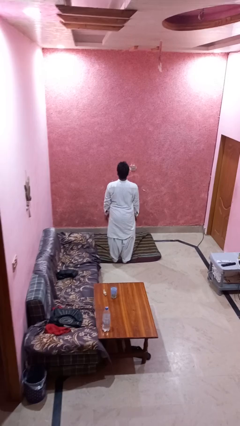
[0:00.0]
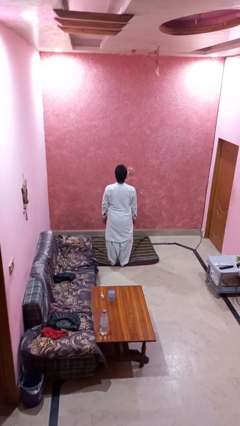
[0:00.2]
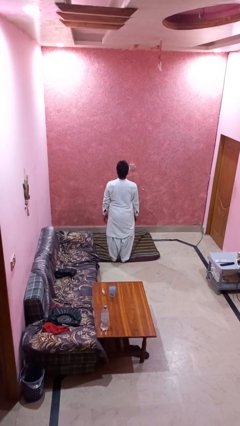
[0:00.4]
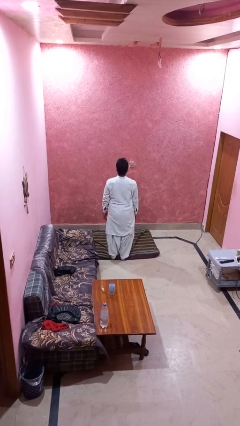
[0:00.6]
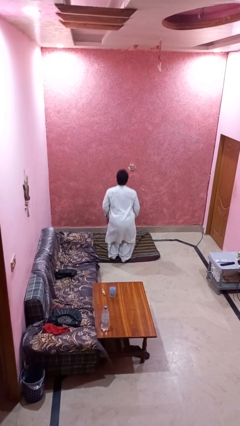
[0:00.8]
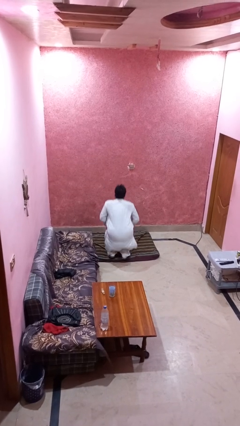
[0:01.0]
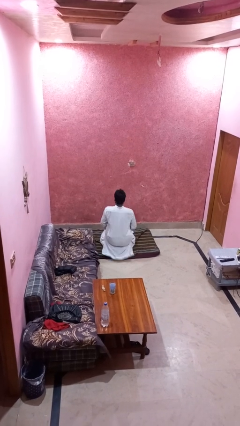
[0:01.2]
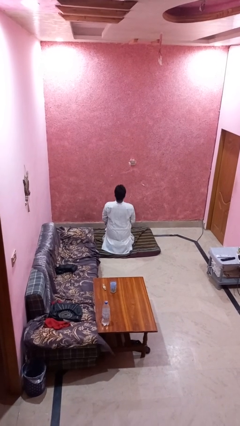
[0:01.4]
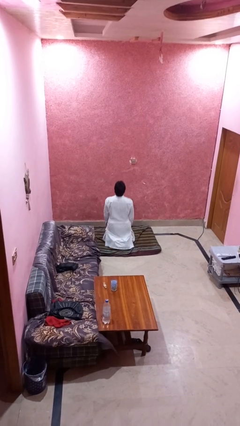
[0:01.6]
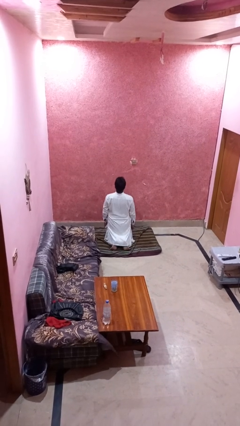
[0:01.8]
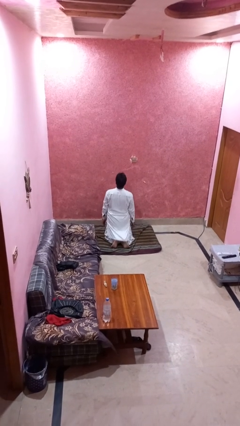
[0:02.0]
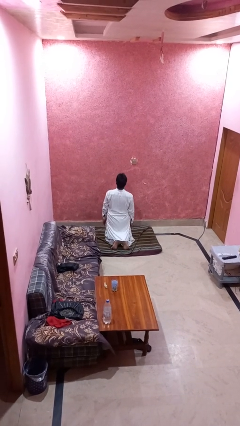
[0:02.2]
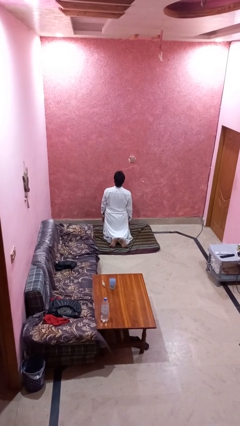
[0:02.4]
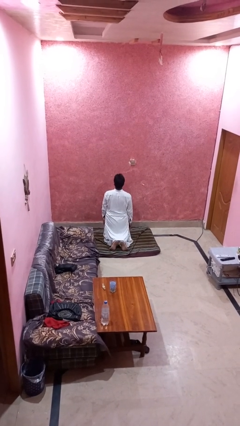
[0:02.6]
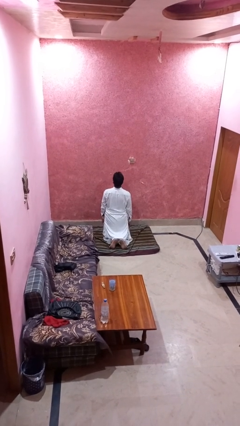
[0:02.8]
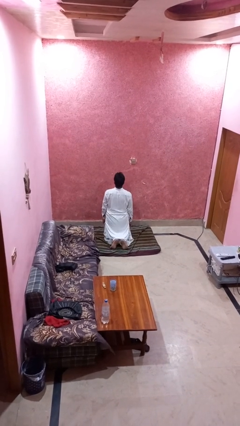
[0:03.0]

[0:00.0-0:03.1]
person kneels

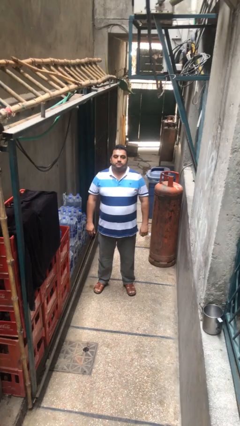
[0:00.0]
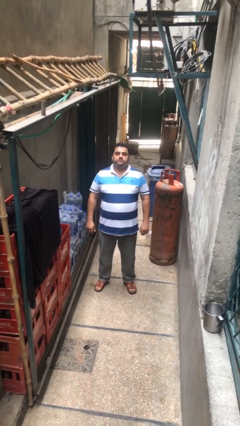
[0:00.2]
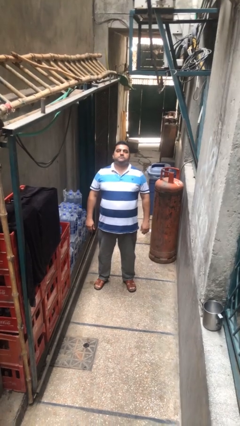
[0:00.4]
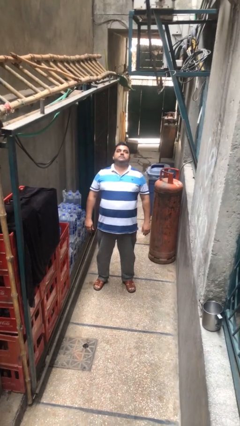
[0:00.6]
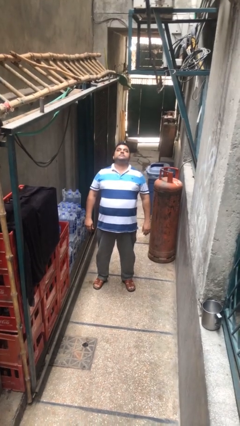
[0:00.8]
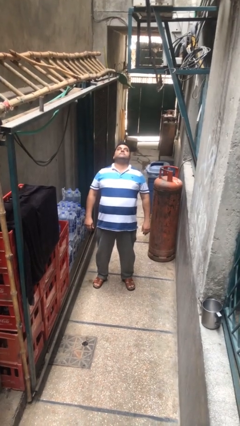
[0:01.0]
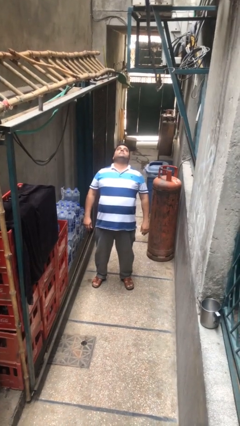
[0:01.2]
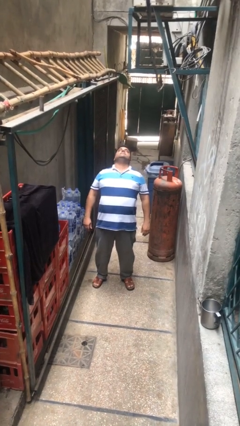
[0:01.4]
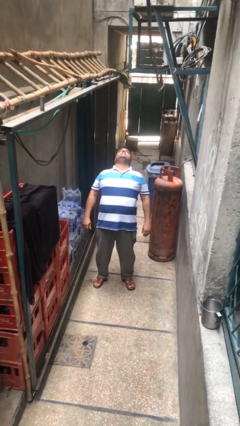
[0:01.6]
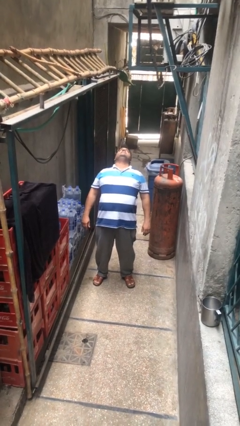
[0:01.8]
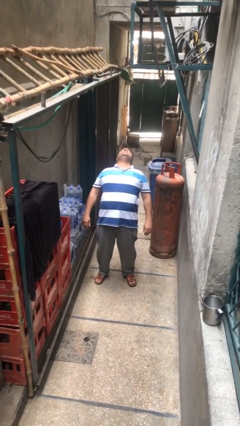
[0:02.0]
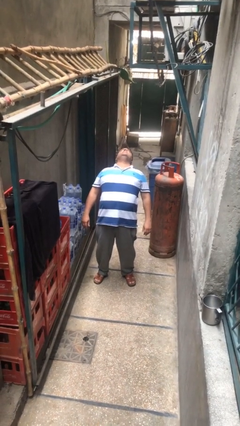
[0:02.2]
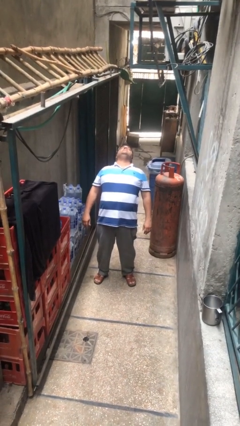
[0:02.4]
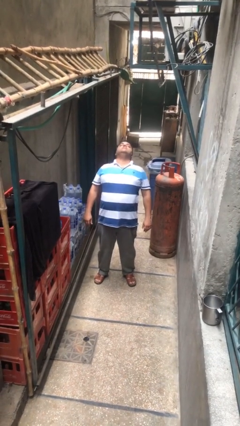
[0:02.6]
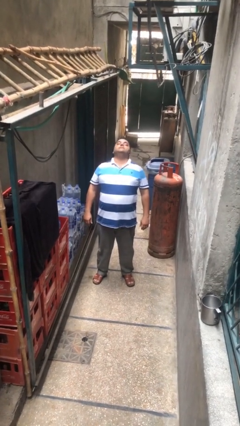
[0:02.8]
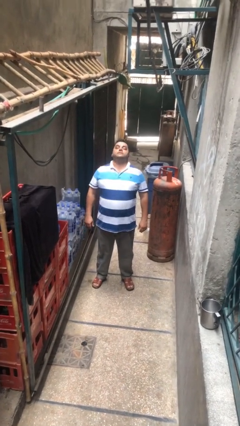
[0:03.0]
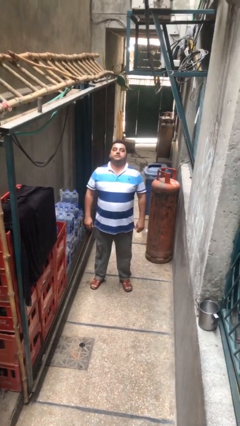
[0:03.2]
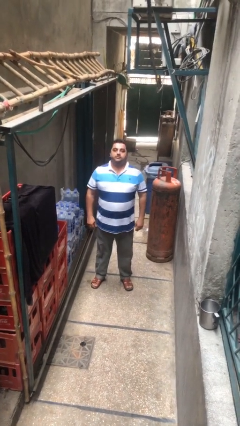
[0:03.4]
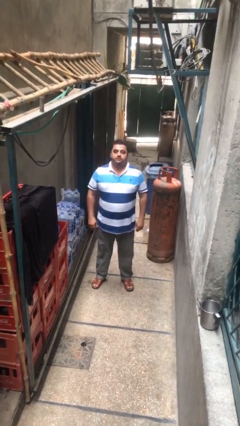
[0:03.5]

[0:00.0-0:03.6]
person stretches back

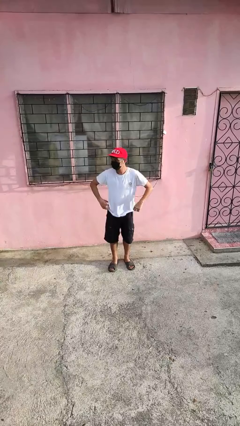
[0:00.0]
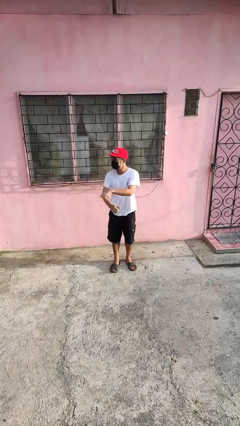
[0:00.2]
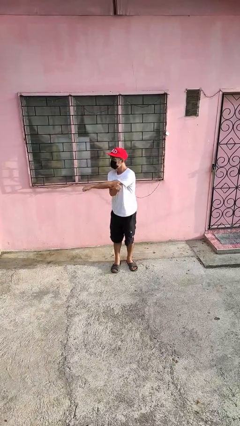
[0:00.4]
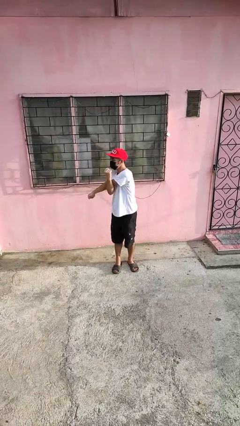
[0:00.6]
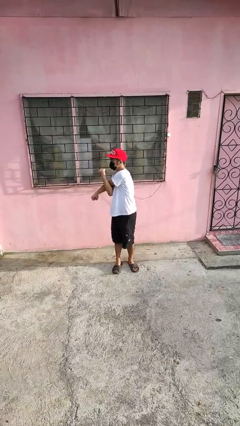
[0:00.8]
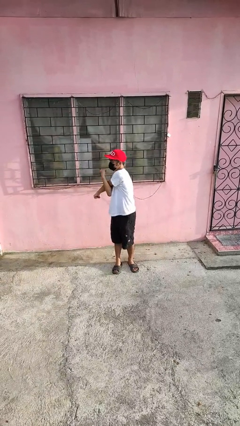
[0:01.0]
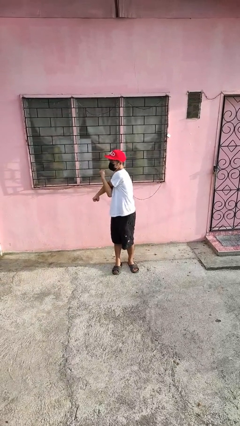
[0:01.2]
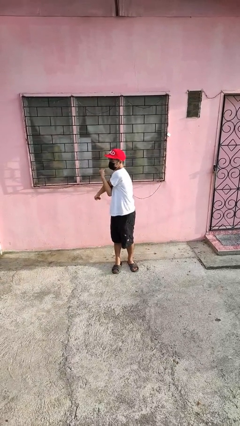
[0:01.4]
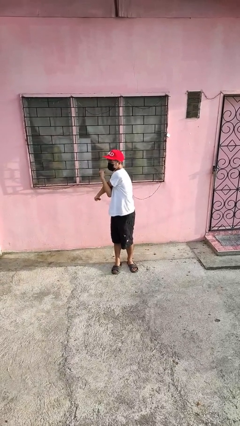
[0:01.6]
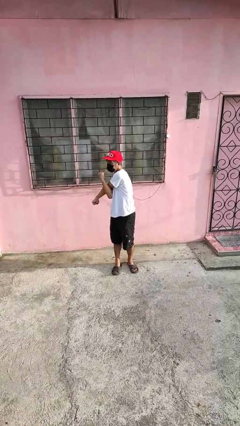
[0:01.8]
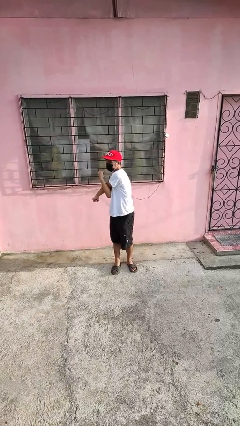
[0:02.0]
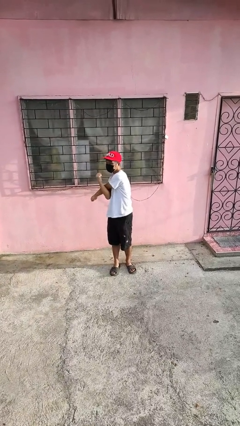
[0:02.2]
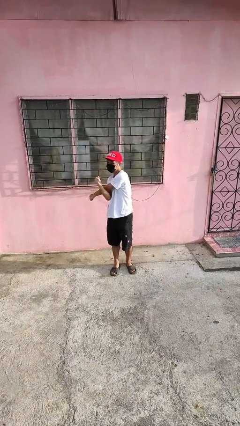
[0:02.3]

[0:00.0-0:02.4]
person stretches arms to side

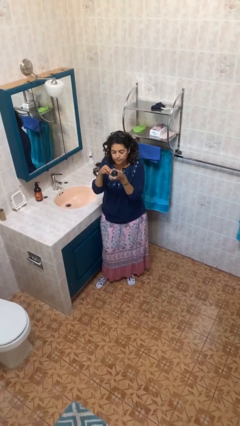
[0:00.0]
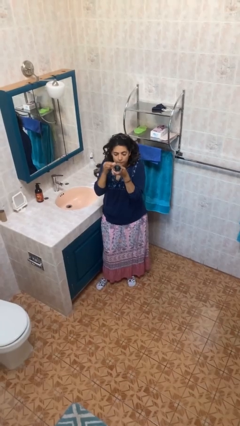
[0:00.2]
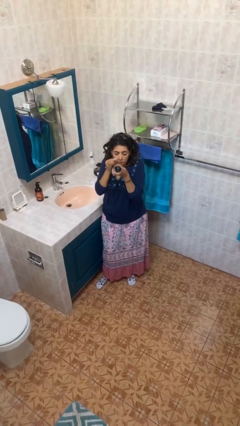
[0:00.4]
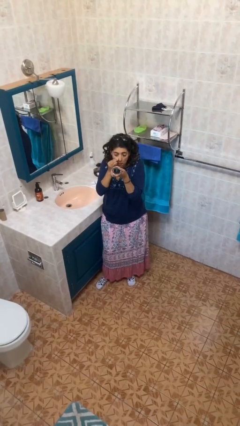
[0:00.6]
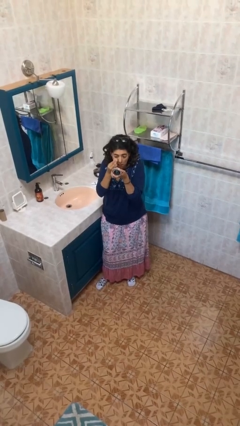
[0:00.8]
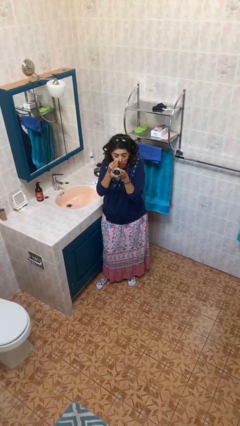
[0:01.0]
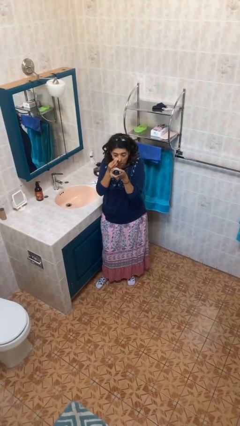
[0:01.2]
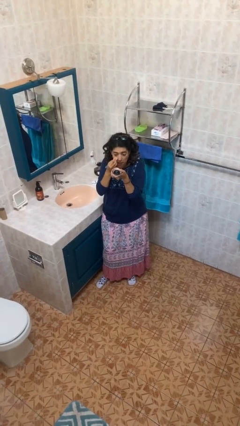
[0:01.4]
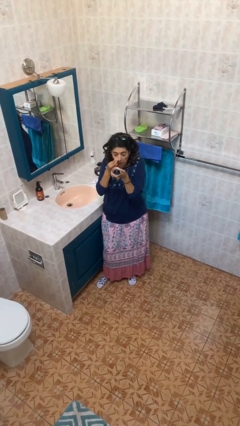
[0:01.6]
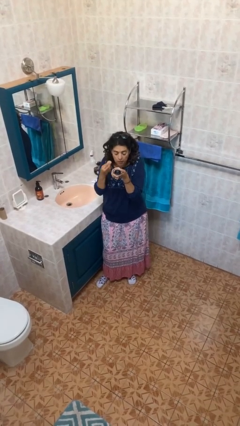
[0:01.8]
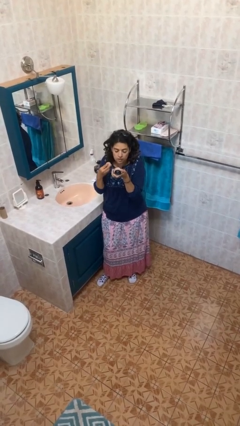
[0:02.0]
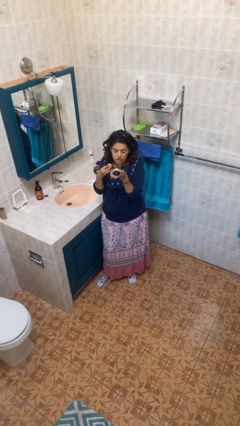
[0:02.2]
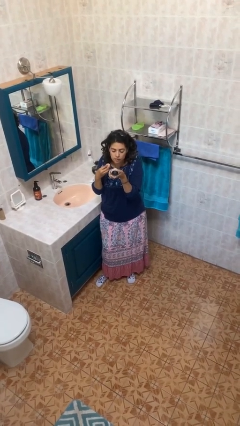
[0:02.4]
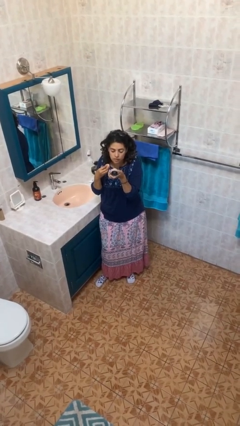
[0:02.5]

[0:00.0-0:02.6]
person applies foundation makeup

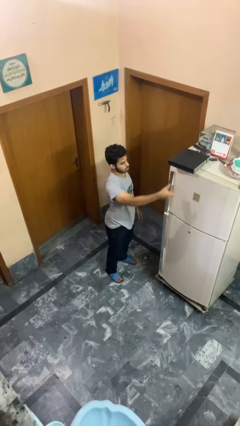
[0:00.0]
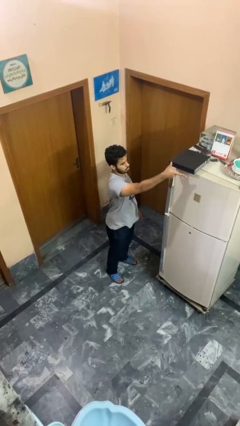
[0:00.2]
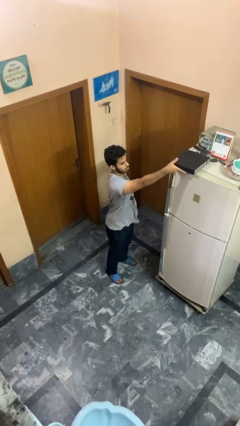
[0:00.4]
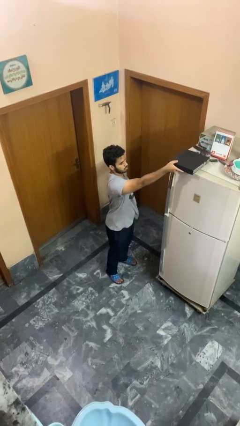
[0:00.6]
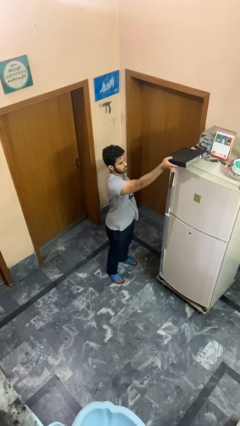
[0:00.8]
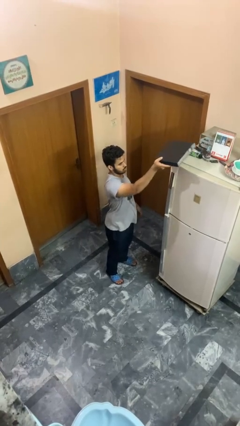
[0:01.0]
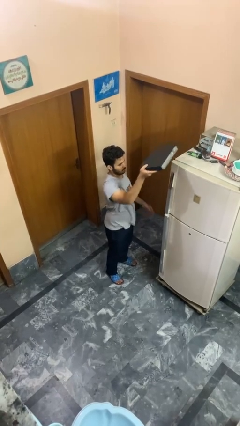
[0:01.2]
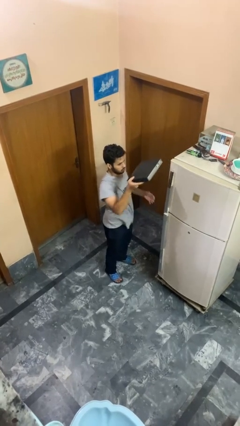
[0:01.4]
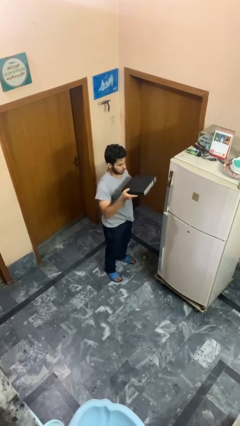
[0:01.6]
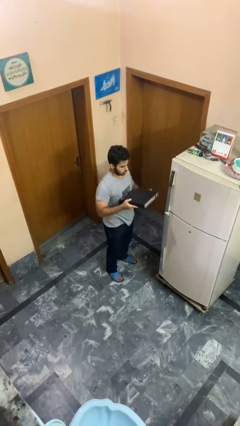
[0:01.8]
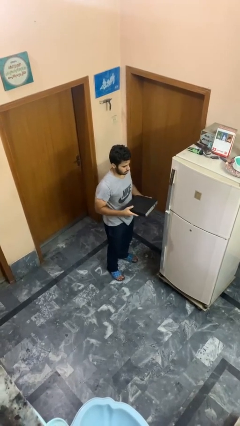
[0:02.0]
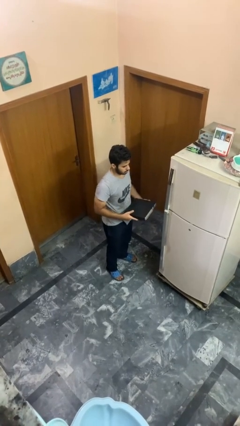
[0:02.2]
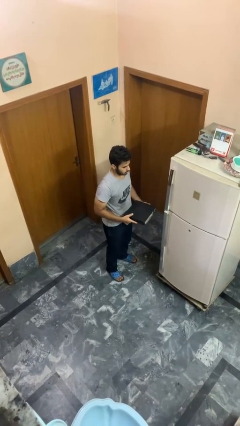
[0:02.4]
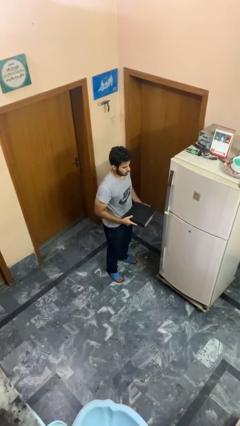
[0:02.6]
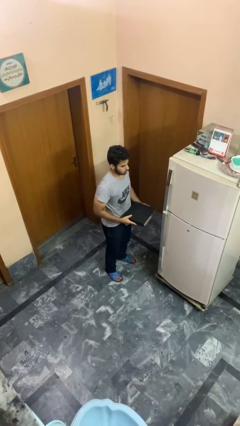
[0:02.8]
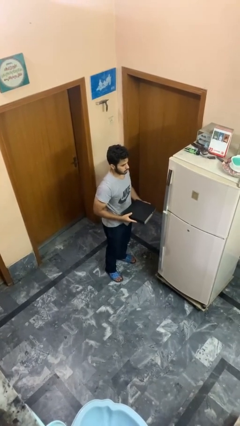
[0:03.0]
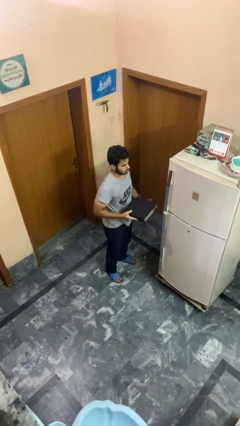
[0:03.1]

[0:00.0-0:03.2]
person picks up object from countertop

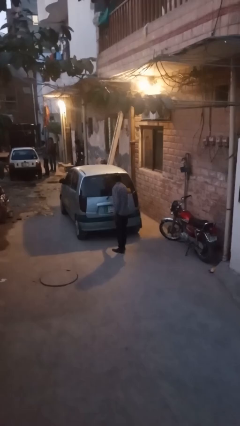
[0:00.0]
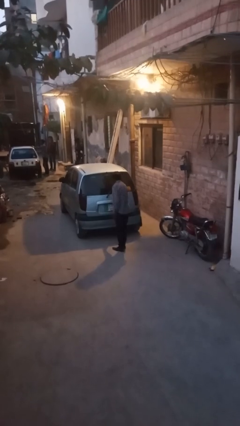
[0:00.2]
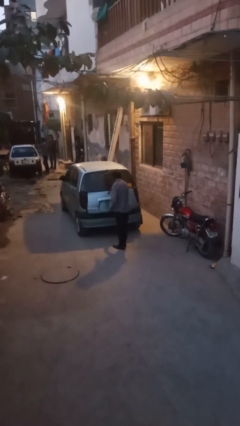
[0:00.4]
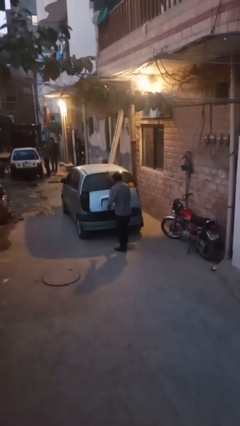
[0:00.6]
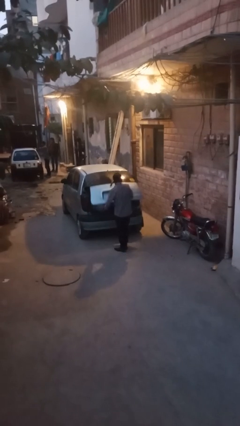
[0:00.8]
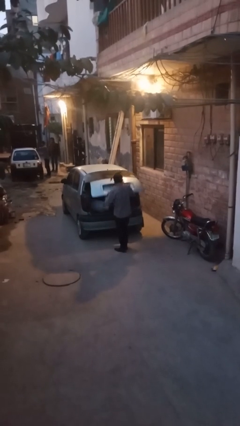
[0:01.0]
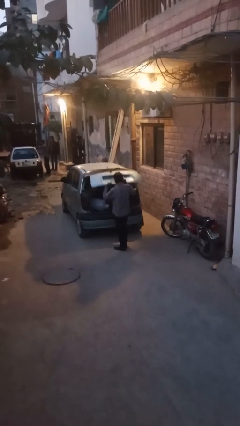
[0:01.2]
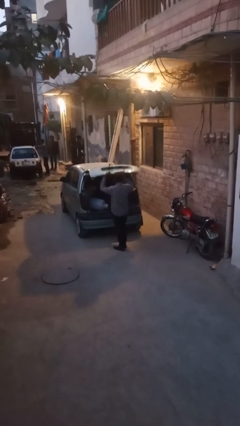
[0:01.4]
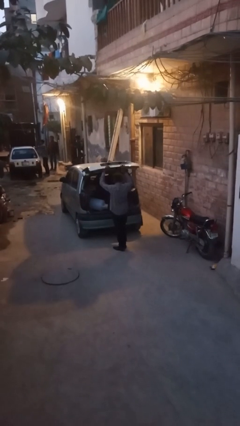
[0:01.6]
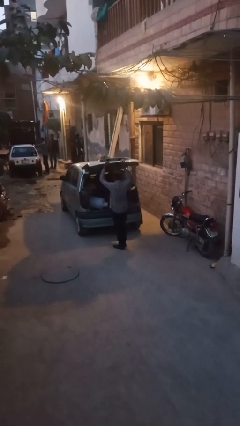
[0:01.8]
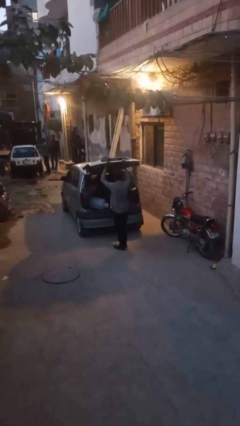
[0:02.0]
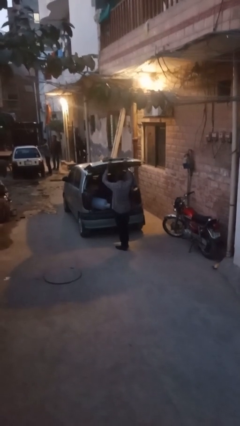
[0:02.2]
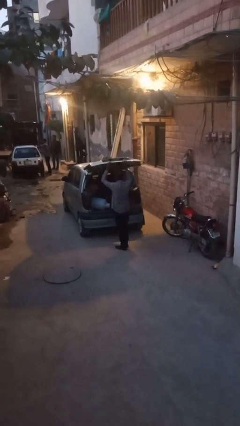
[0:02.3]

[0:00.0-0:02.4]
person opens car trunk

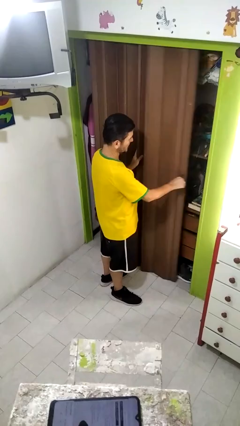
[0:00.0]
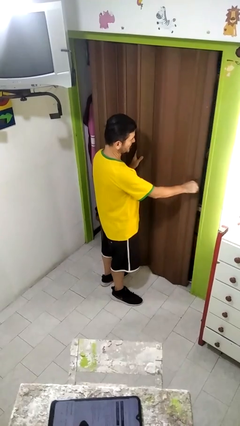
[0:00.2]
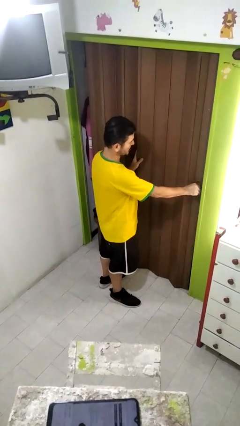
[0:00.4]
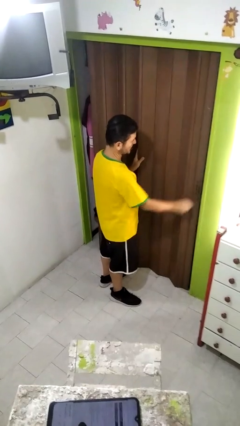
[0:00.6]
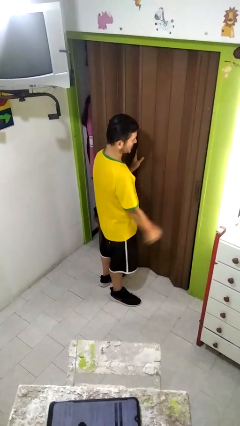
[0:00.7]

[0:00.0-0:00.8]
person closes closet door
